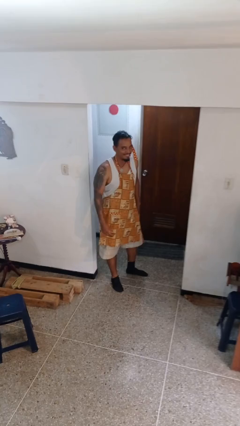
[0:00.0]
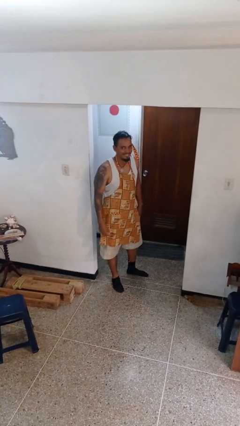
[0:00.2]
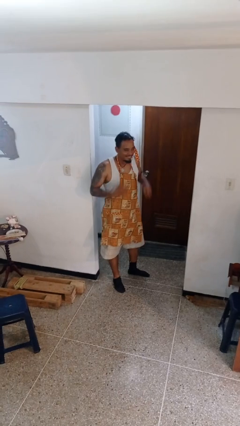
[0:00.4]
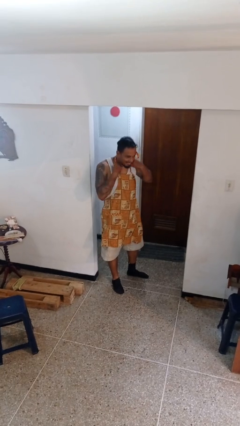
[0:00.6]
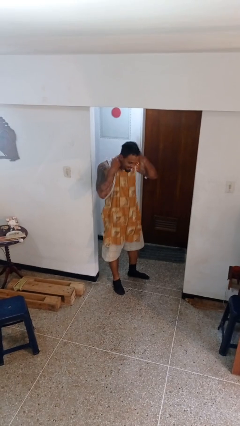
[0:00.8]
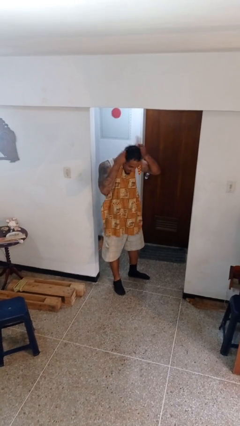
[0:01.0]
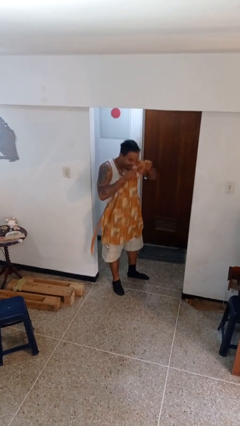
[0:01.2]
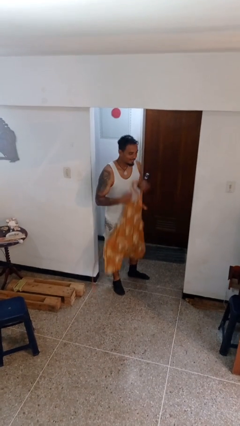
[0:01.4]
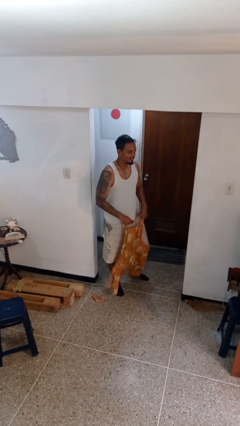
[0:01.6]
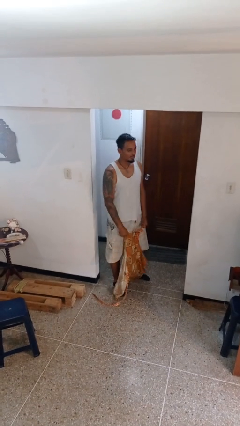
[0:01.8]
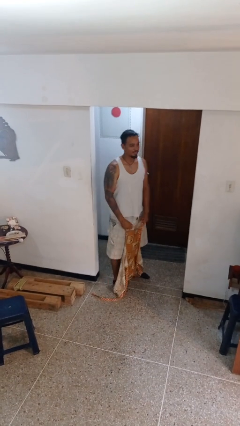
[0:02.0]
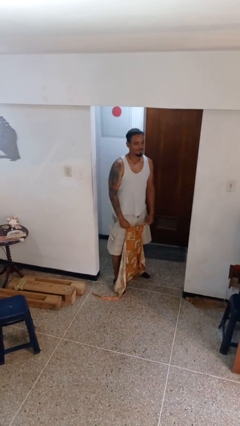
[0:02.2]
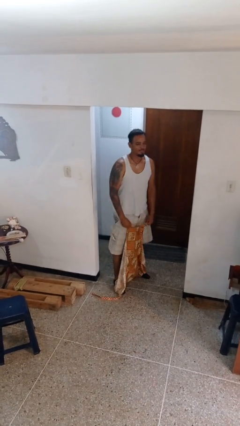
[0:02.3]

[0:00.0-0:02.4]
person takes off apron

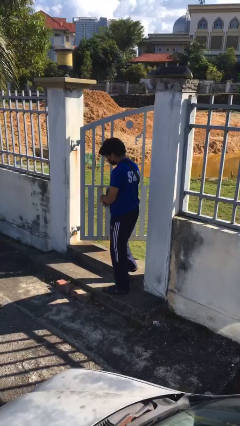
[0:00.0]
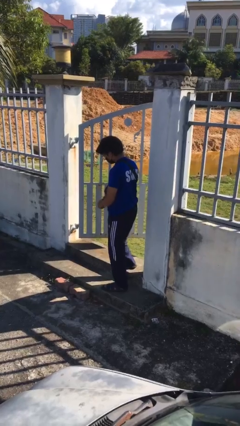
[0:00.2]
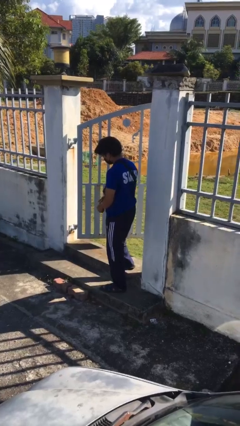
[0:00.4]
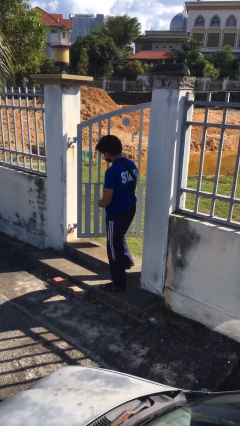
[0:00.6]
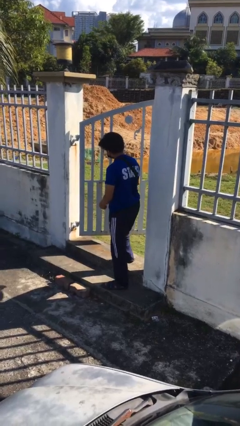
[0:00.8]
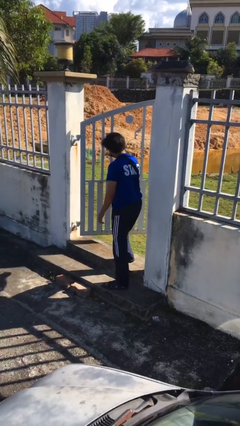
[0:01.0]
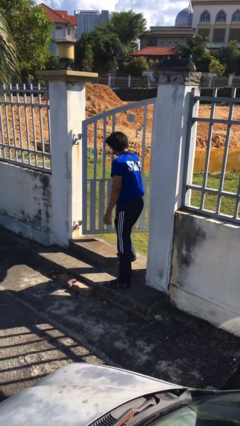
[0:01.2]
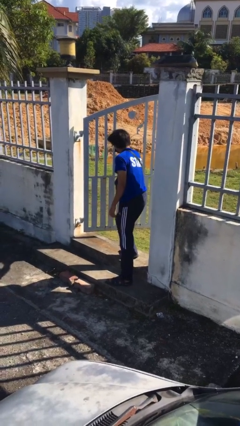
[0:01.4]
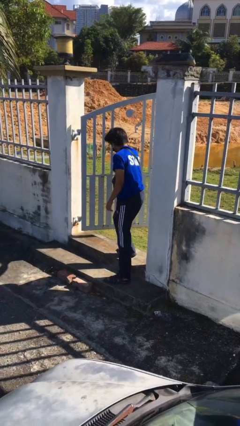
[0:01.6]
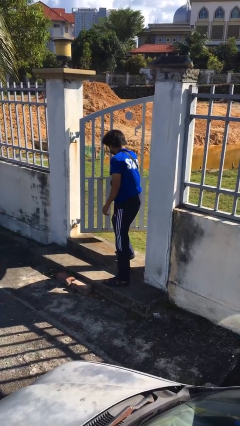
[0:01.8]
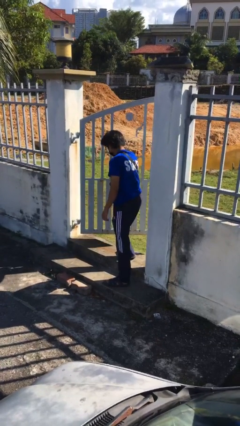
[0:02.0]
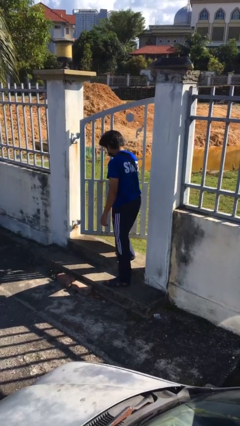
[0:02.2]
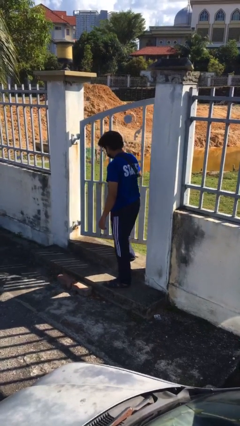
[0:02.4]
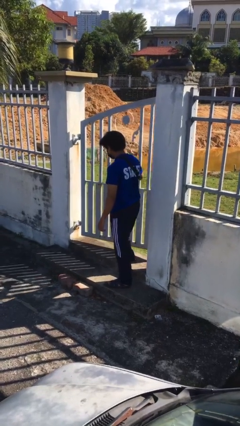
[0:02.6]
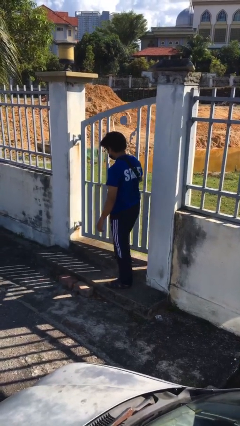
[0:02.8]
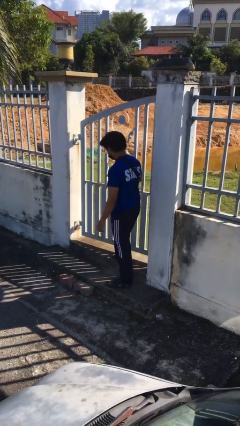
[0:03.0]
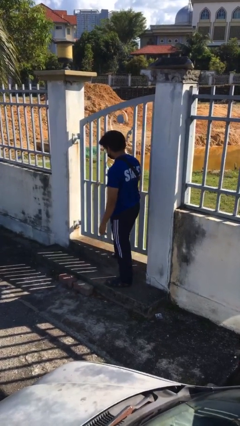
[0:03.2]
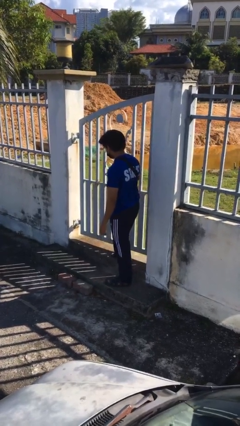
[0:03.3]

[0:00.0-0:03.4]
person closes facility door

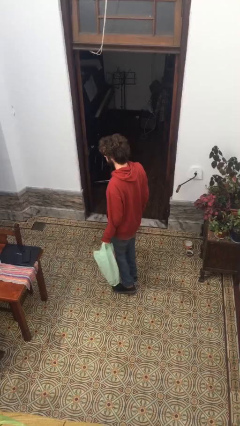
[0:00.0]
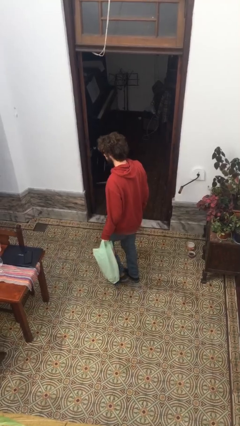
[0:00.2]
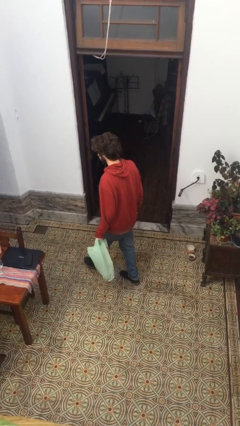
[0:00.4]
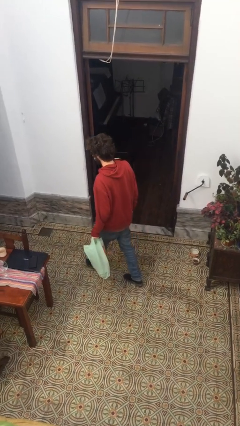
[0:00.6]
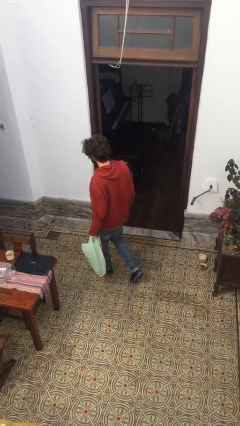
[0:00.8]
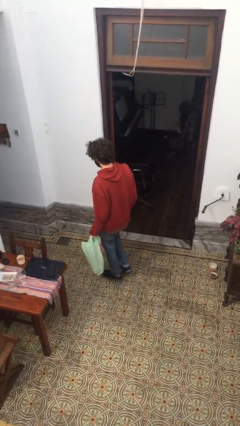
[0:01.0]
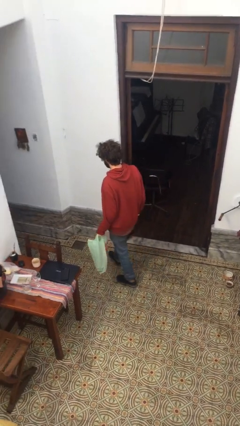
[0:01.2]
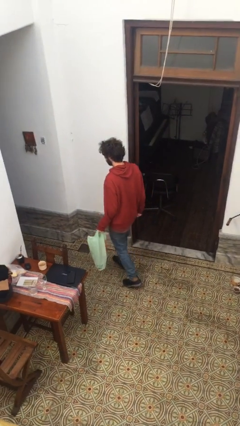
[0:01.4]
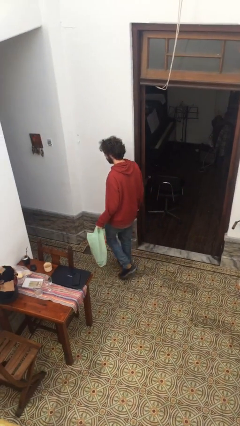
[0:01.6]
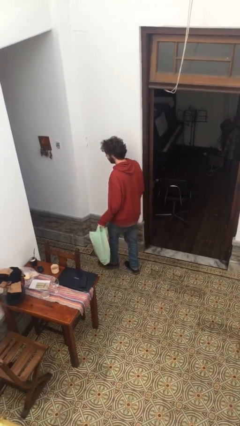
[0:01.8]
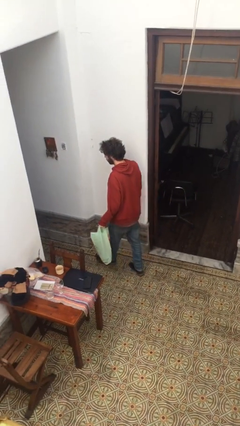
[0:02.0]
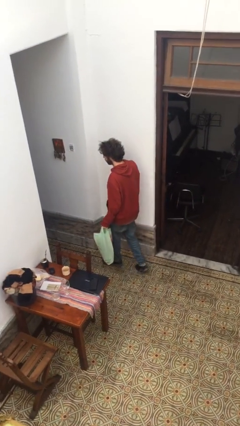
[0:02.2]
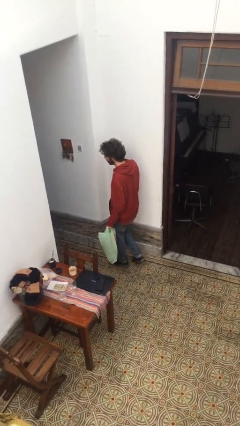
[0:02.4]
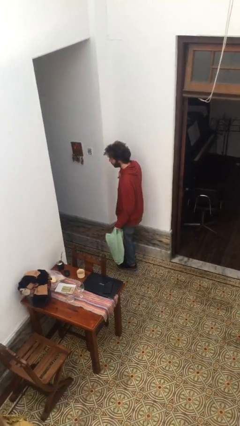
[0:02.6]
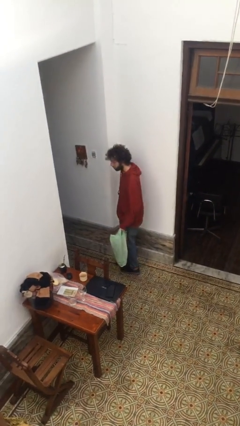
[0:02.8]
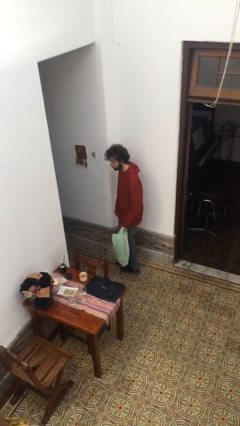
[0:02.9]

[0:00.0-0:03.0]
person carries groceries

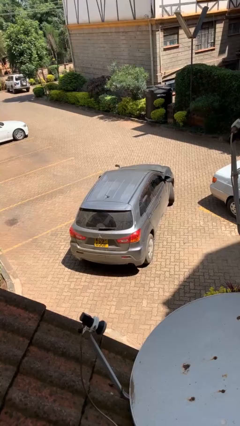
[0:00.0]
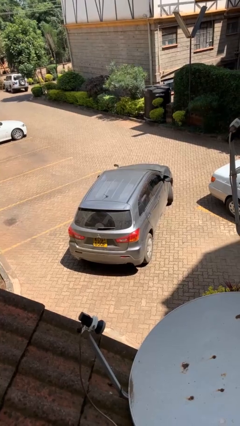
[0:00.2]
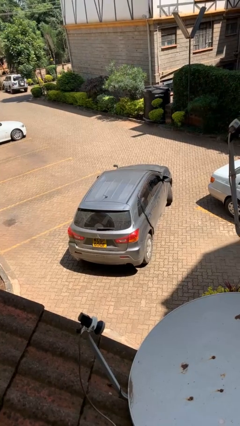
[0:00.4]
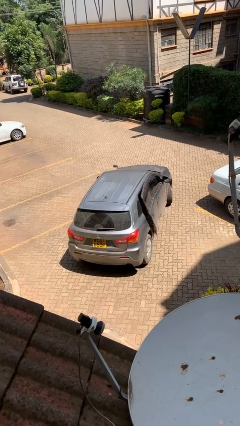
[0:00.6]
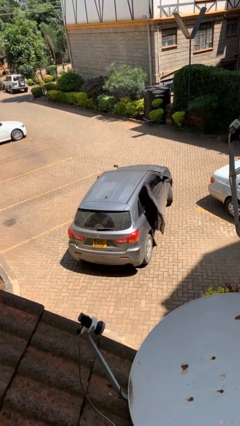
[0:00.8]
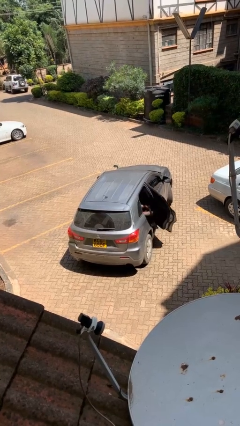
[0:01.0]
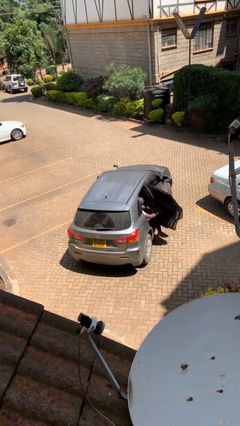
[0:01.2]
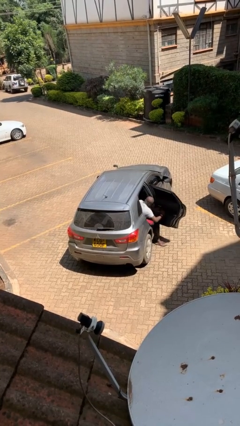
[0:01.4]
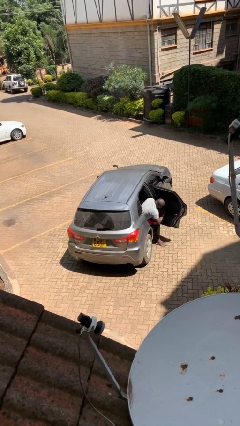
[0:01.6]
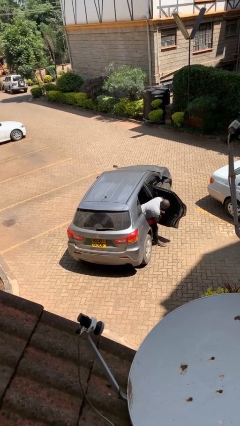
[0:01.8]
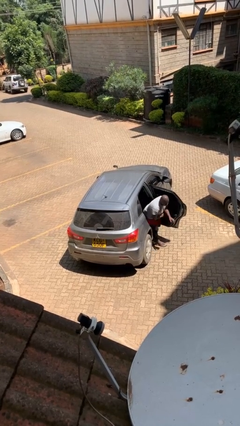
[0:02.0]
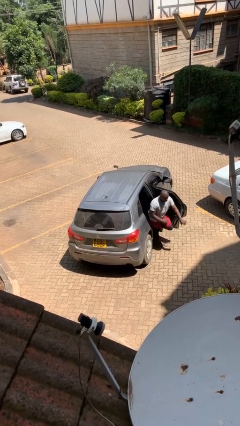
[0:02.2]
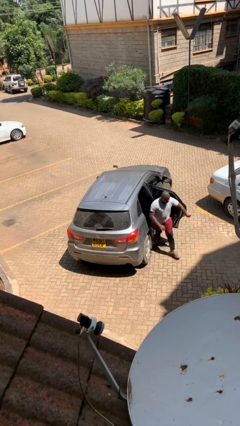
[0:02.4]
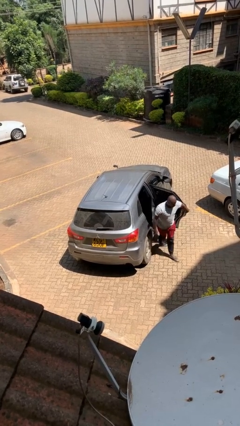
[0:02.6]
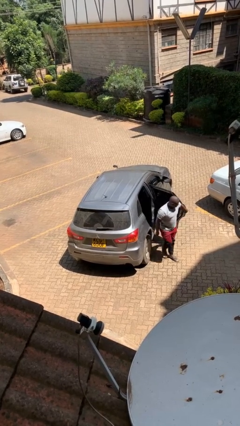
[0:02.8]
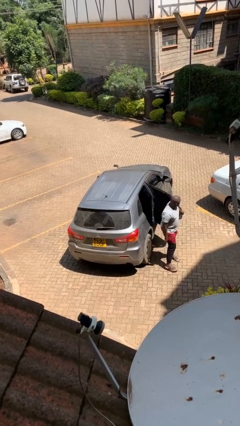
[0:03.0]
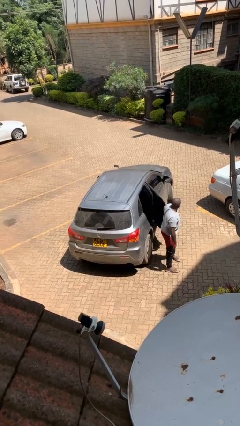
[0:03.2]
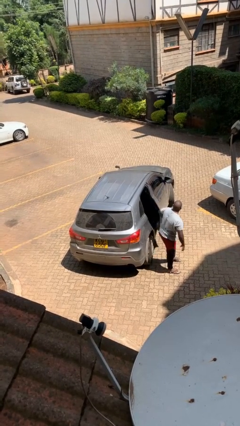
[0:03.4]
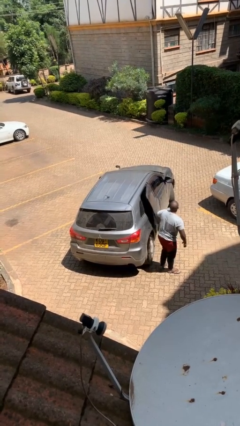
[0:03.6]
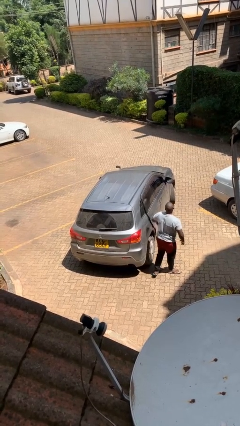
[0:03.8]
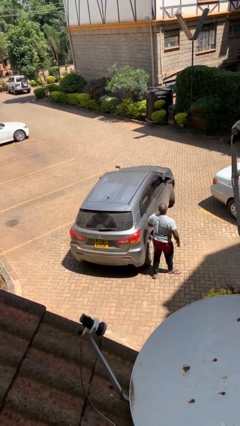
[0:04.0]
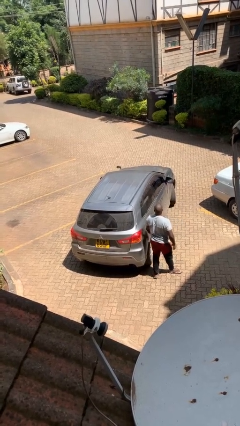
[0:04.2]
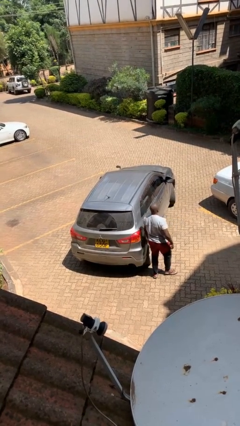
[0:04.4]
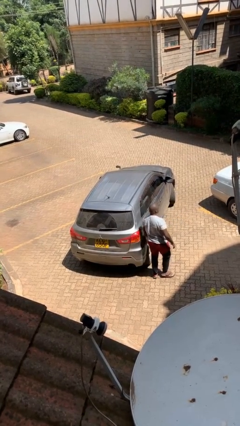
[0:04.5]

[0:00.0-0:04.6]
car drops off person

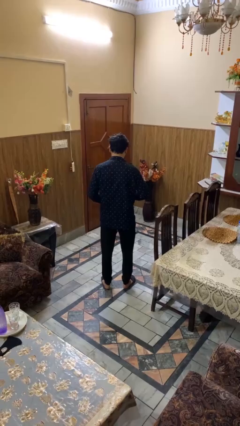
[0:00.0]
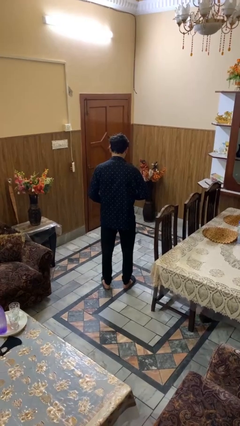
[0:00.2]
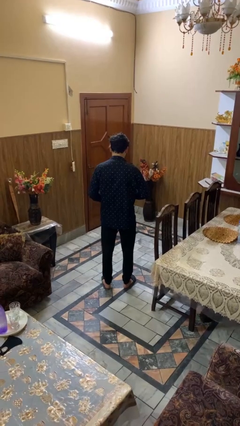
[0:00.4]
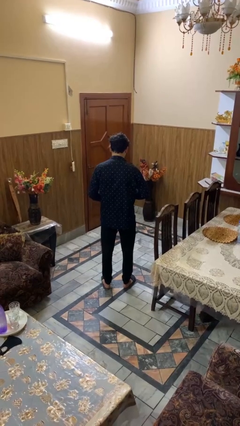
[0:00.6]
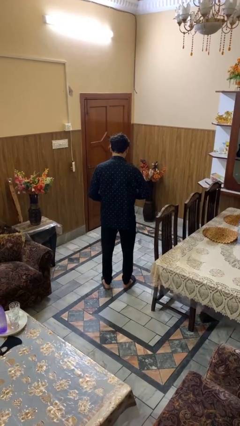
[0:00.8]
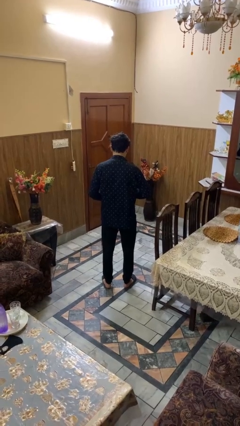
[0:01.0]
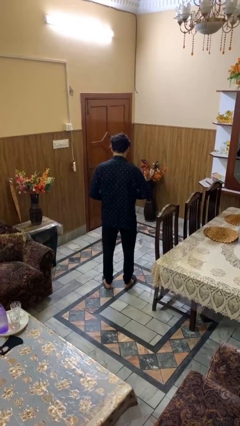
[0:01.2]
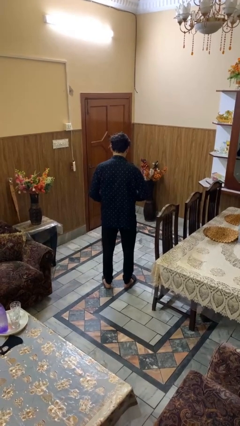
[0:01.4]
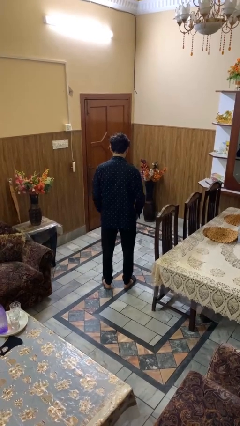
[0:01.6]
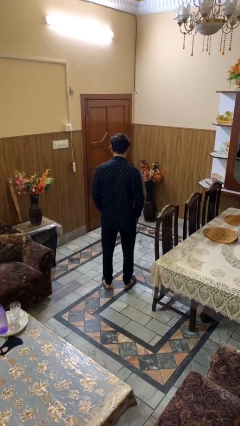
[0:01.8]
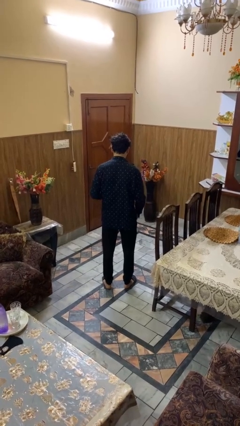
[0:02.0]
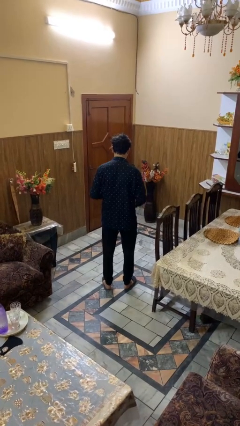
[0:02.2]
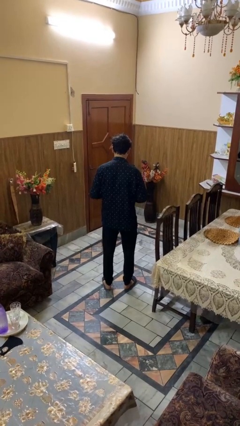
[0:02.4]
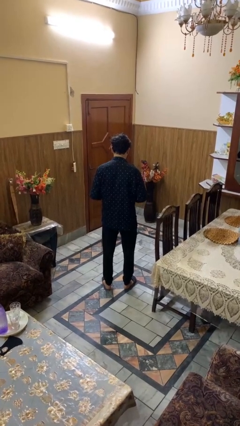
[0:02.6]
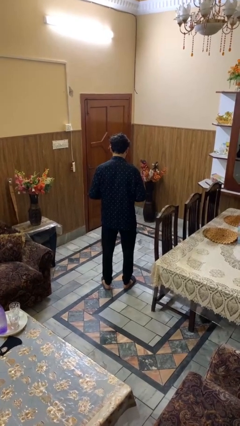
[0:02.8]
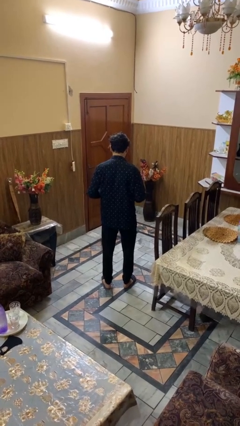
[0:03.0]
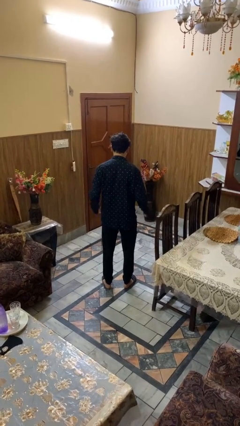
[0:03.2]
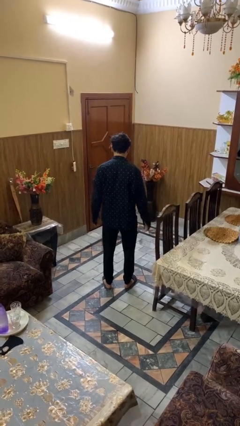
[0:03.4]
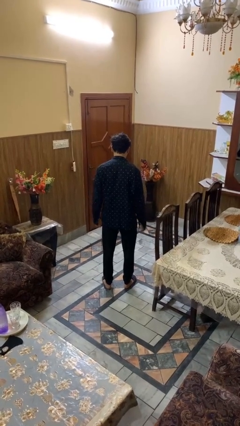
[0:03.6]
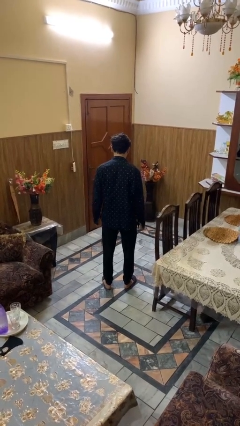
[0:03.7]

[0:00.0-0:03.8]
person unbuttons shirt

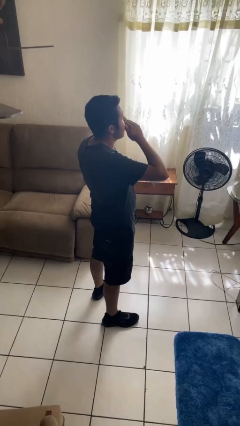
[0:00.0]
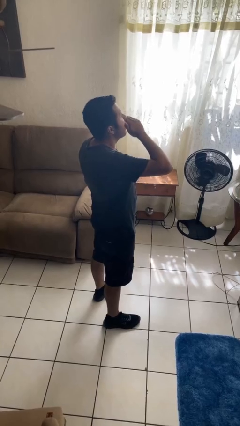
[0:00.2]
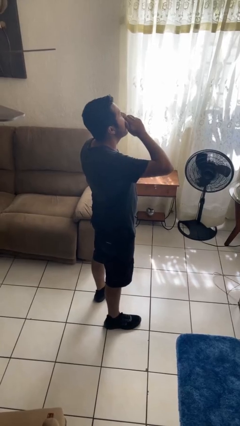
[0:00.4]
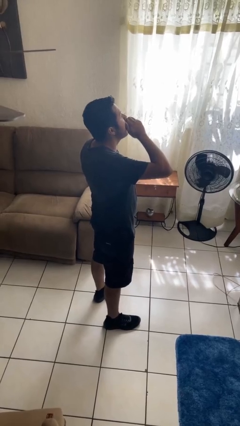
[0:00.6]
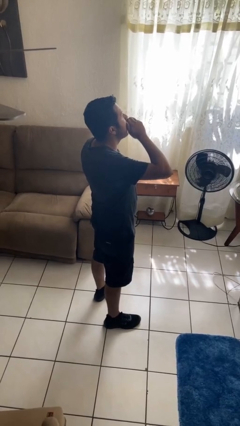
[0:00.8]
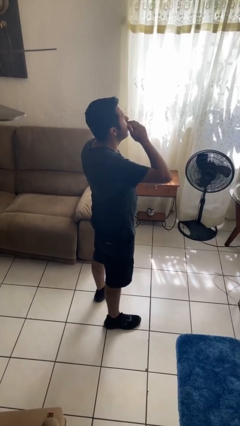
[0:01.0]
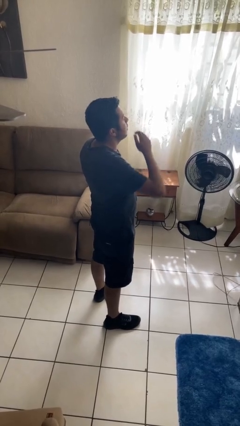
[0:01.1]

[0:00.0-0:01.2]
person yawns
